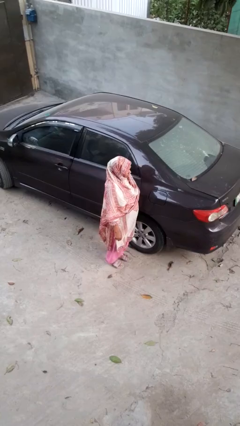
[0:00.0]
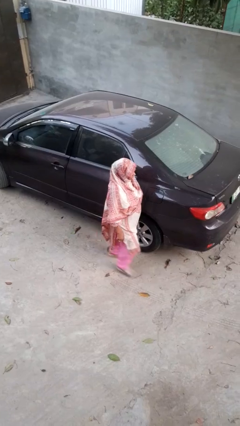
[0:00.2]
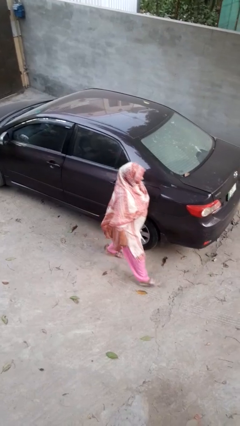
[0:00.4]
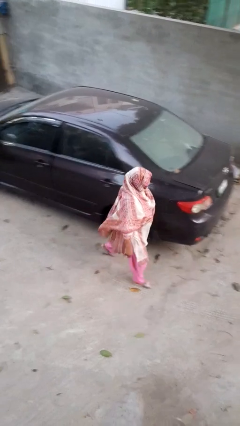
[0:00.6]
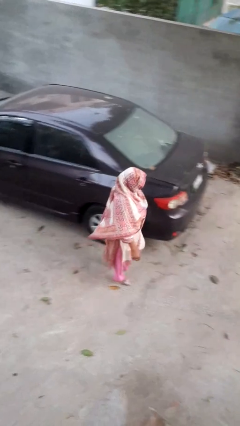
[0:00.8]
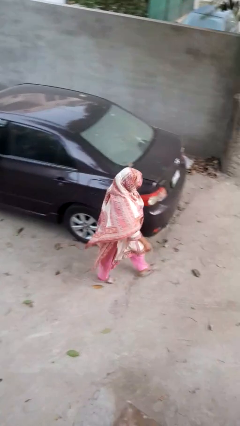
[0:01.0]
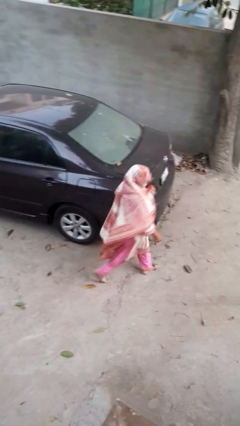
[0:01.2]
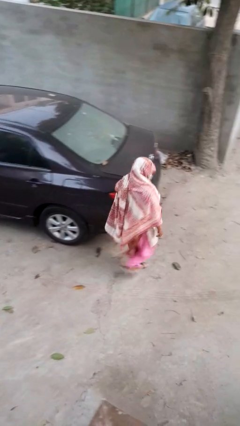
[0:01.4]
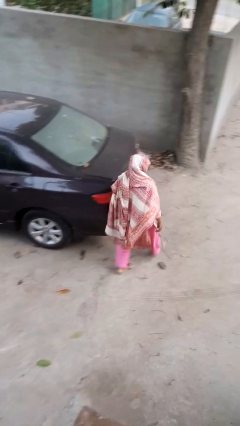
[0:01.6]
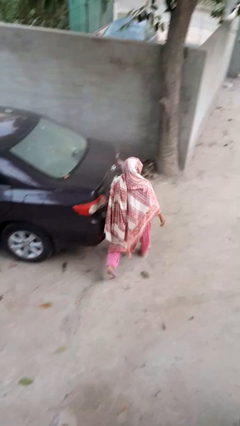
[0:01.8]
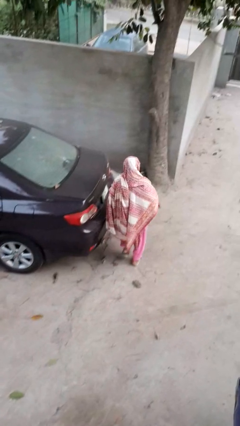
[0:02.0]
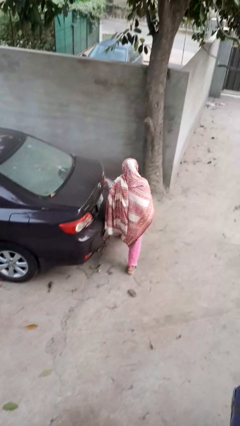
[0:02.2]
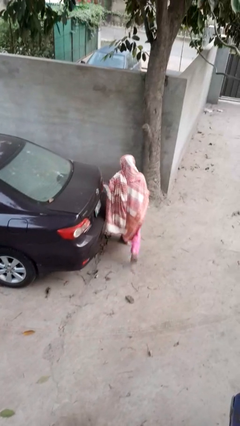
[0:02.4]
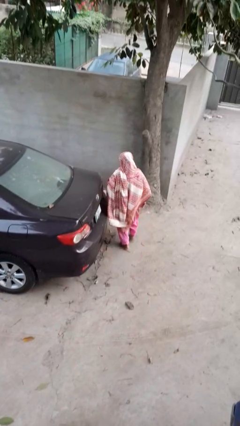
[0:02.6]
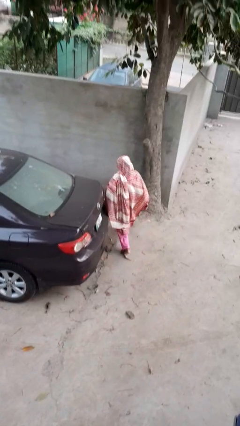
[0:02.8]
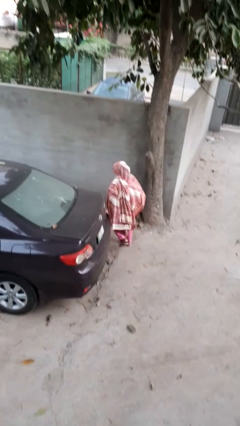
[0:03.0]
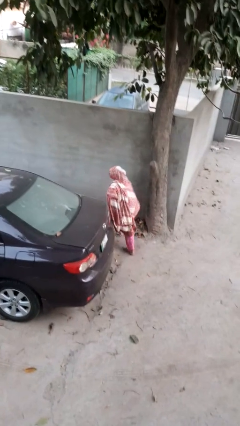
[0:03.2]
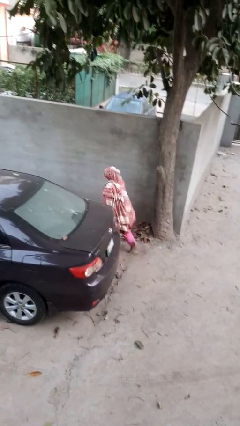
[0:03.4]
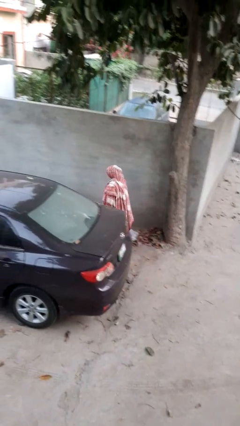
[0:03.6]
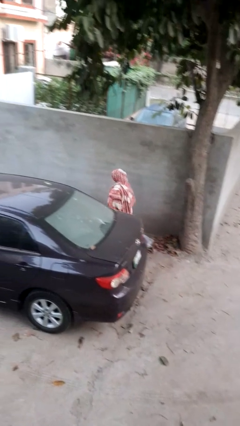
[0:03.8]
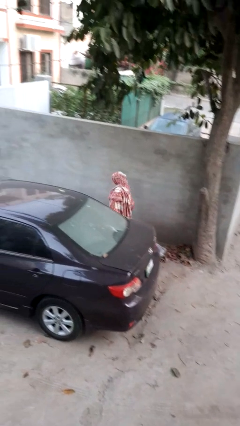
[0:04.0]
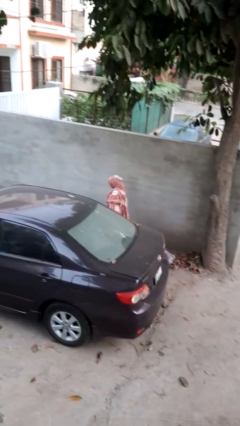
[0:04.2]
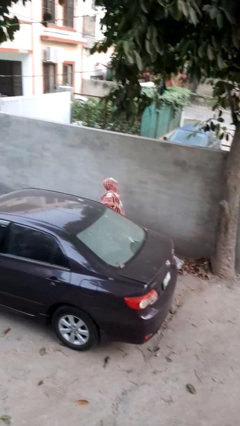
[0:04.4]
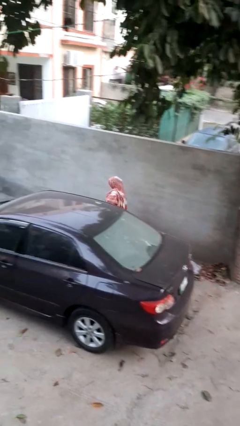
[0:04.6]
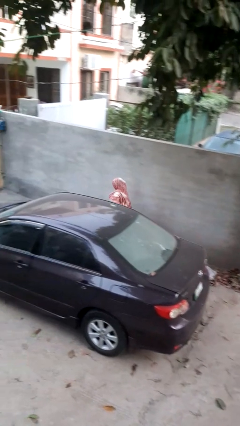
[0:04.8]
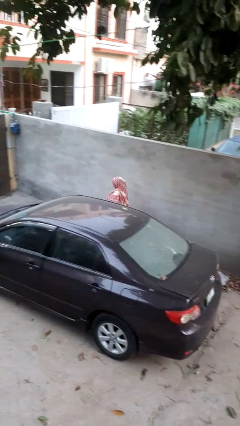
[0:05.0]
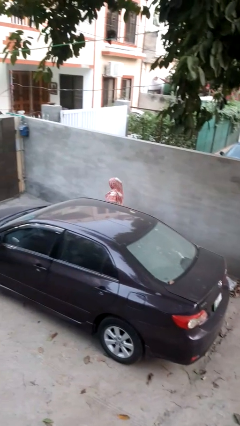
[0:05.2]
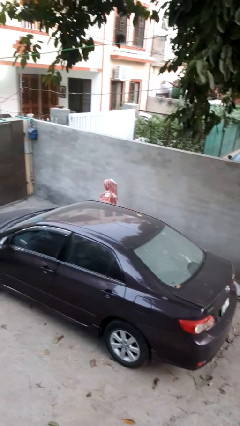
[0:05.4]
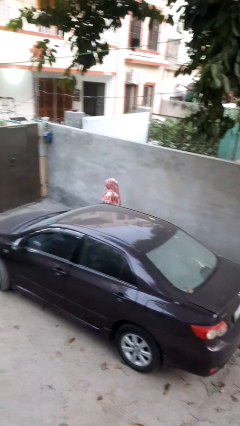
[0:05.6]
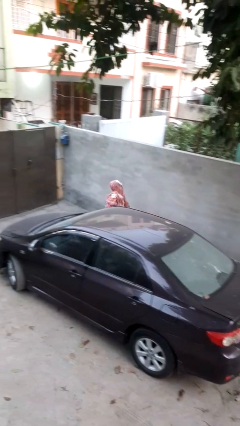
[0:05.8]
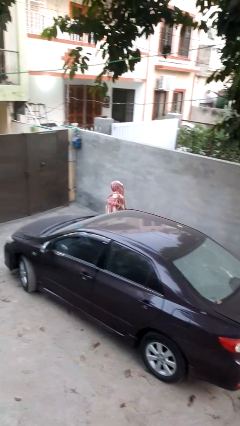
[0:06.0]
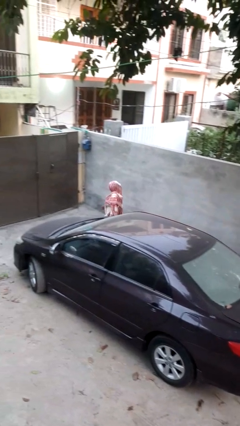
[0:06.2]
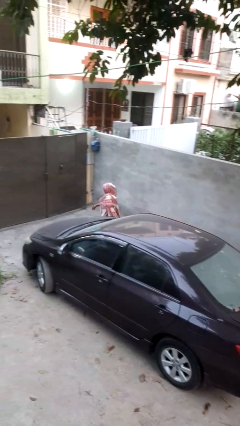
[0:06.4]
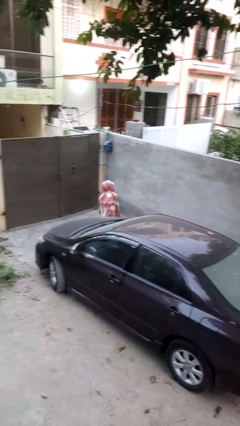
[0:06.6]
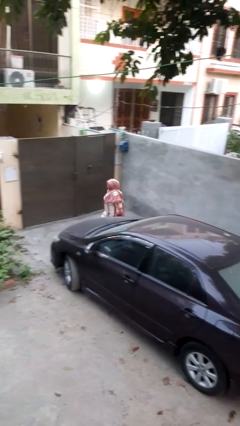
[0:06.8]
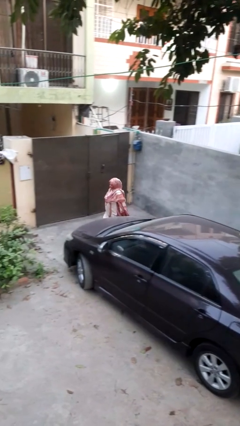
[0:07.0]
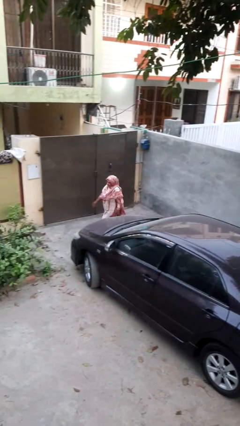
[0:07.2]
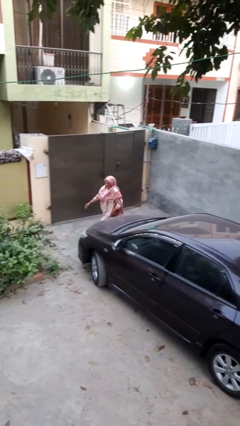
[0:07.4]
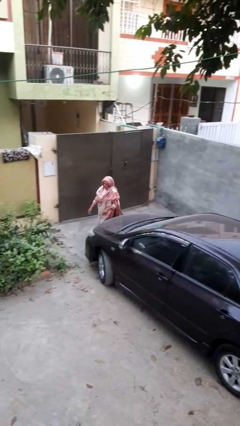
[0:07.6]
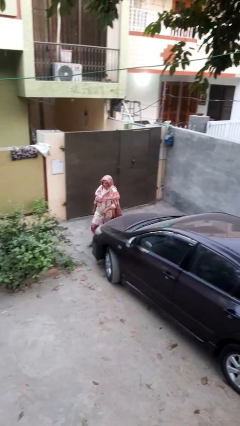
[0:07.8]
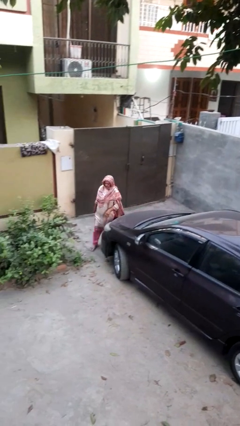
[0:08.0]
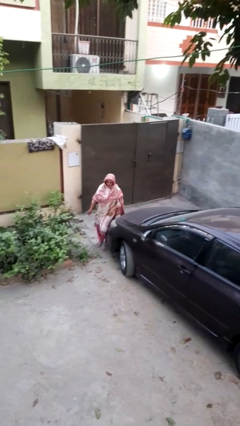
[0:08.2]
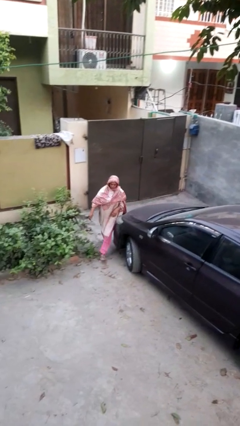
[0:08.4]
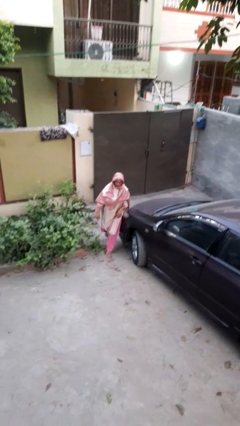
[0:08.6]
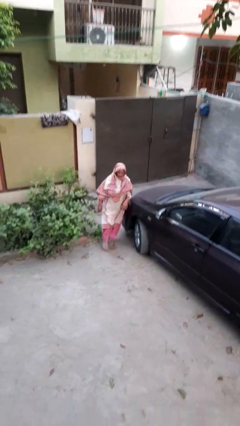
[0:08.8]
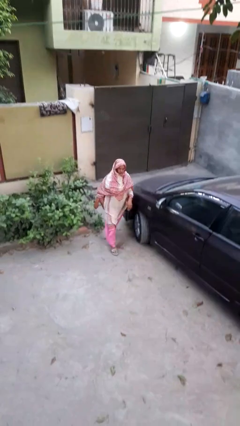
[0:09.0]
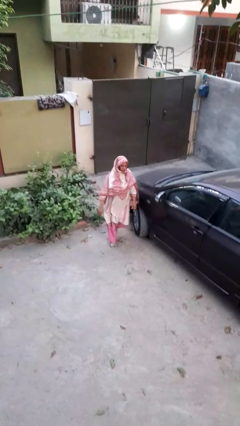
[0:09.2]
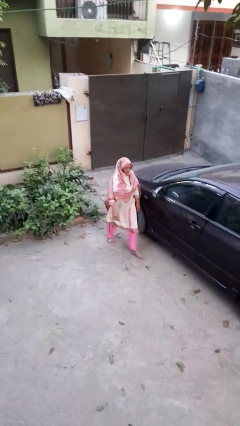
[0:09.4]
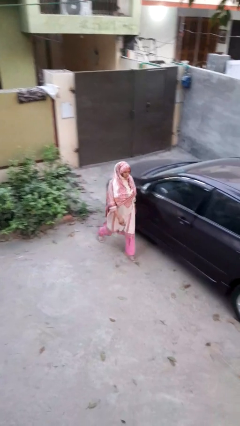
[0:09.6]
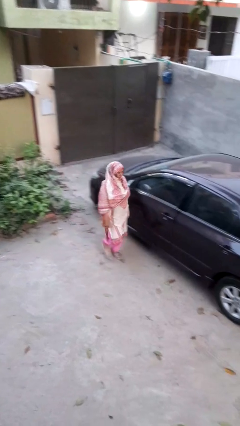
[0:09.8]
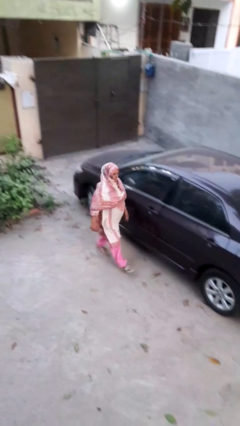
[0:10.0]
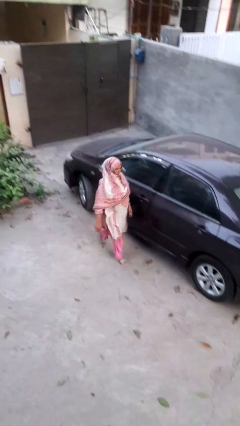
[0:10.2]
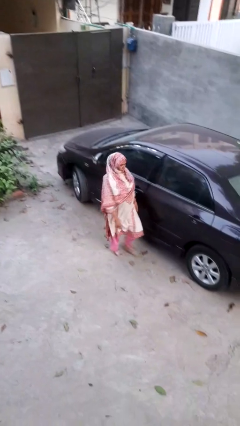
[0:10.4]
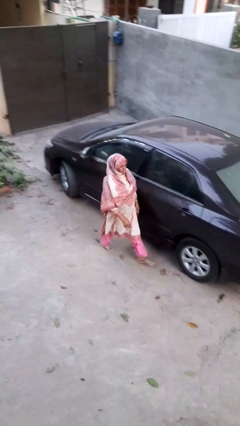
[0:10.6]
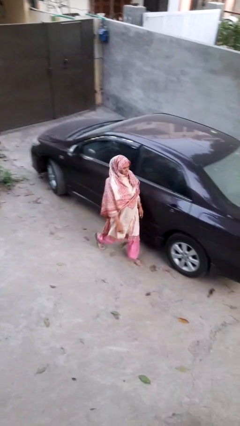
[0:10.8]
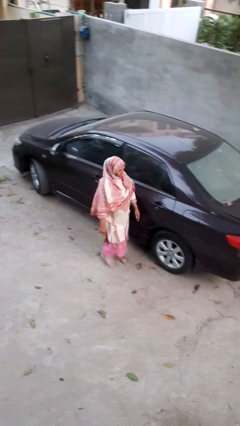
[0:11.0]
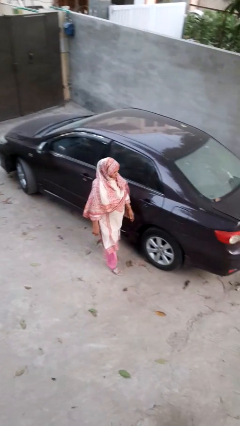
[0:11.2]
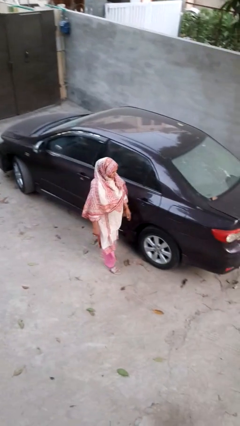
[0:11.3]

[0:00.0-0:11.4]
person walks around car

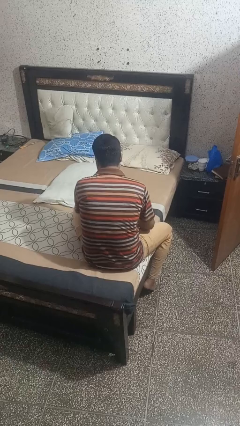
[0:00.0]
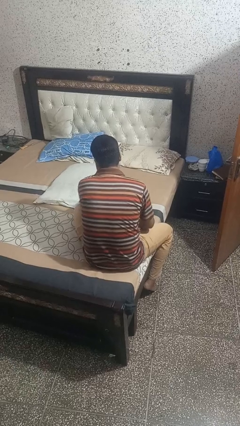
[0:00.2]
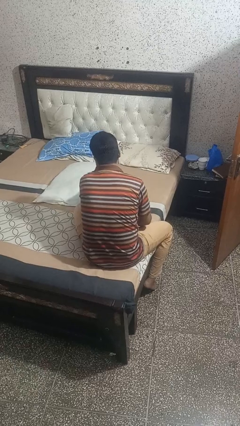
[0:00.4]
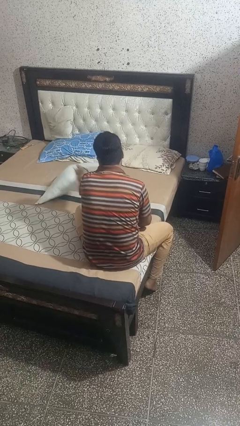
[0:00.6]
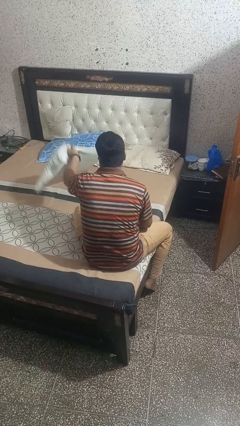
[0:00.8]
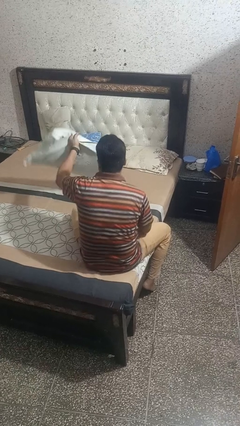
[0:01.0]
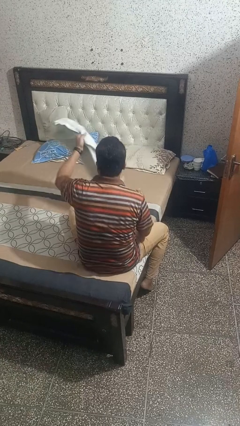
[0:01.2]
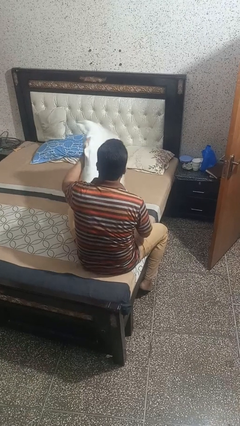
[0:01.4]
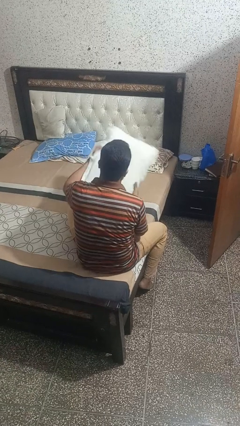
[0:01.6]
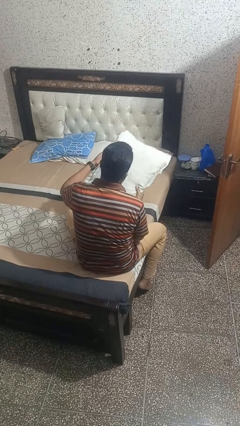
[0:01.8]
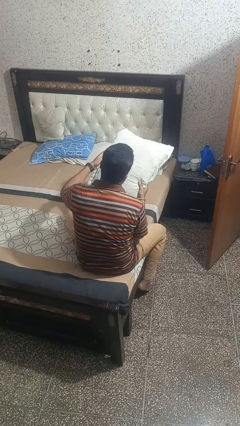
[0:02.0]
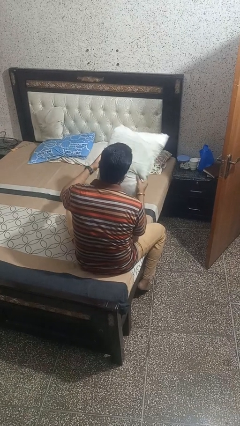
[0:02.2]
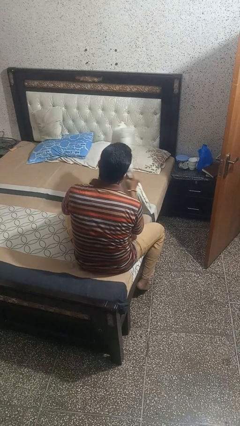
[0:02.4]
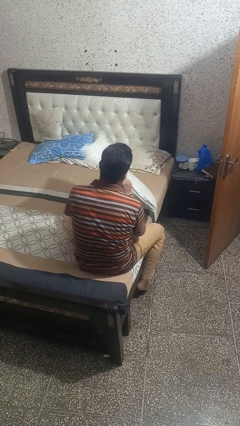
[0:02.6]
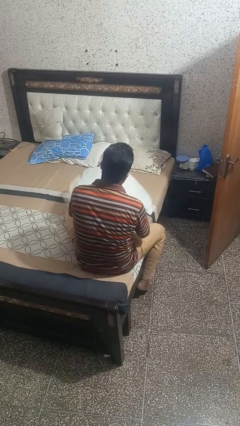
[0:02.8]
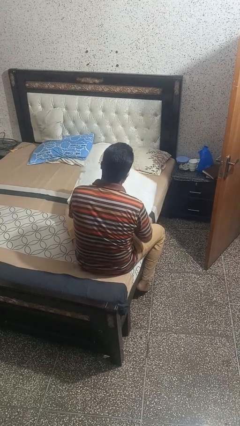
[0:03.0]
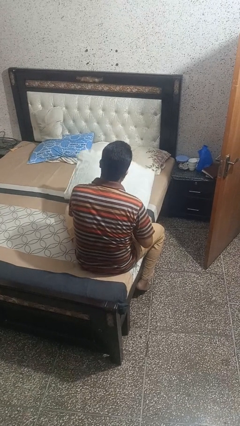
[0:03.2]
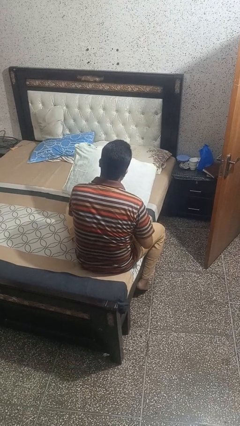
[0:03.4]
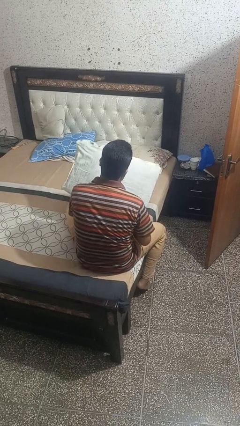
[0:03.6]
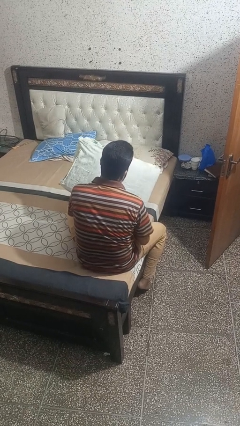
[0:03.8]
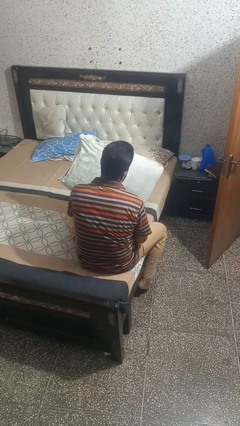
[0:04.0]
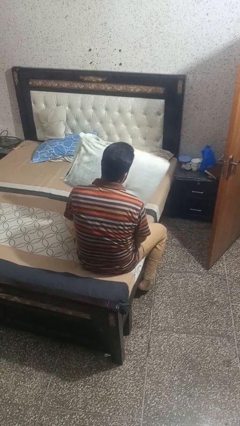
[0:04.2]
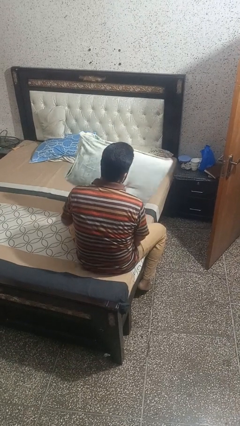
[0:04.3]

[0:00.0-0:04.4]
person picks up object from bed

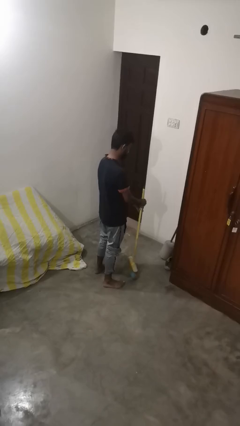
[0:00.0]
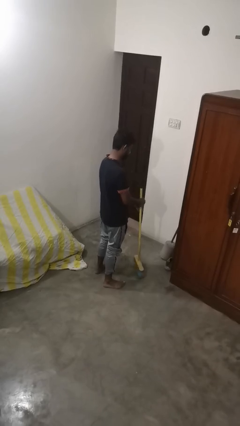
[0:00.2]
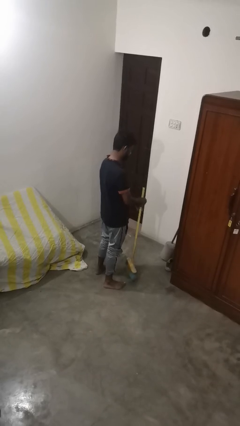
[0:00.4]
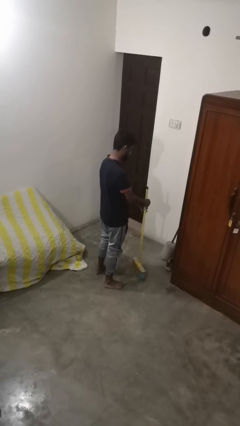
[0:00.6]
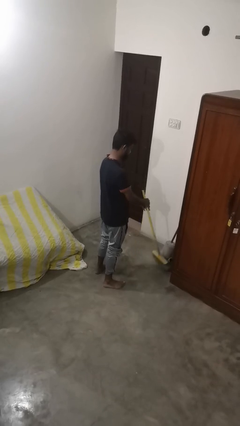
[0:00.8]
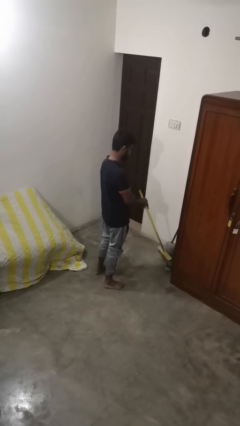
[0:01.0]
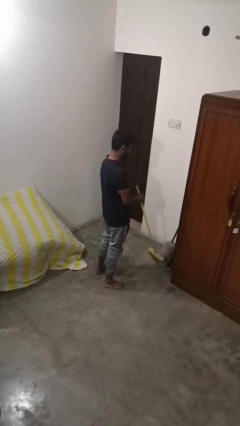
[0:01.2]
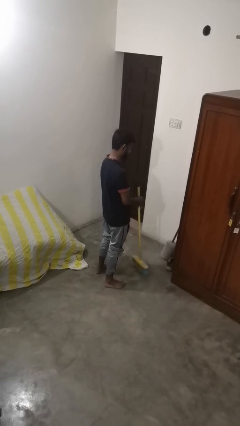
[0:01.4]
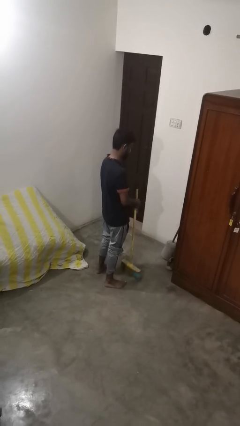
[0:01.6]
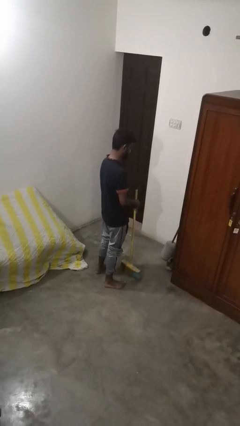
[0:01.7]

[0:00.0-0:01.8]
person sweeps floor
